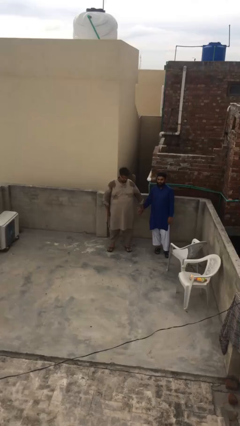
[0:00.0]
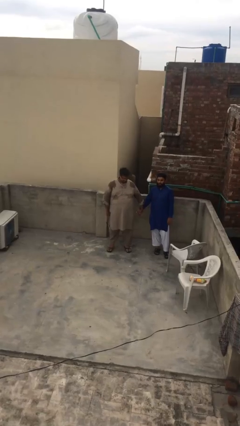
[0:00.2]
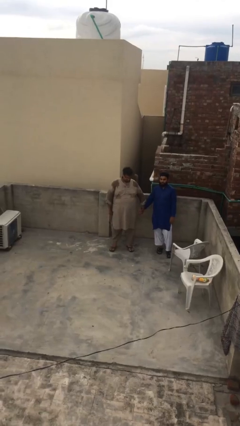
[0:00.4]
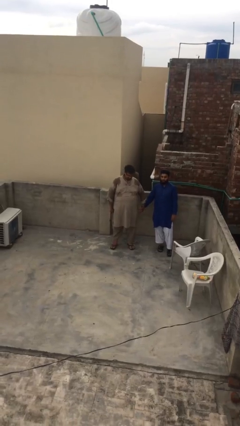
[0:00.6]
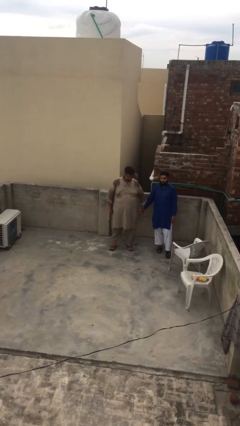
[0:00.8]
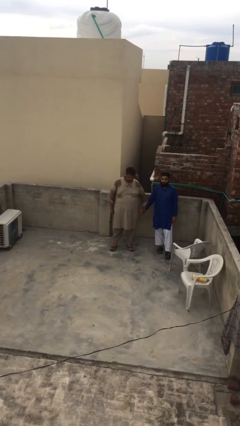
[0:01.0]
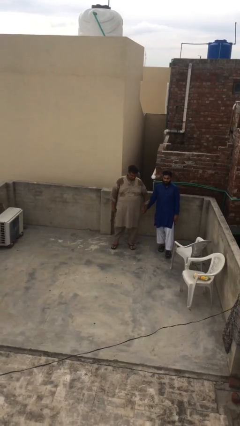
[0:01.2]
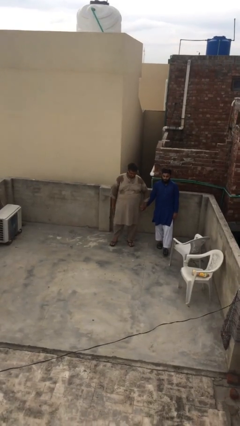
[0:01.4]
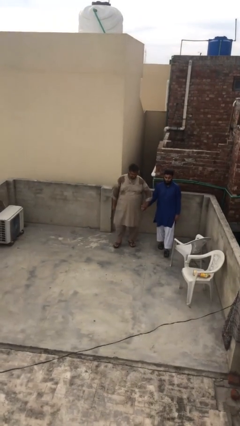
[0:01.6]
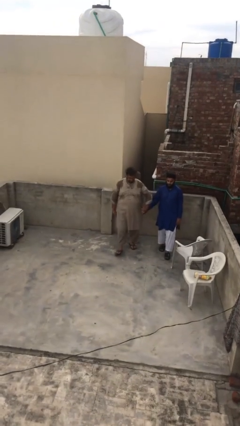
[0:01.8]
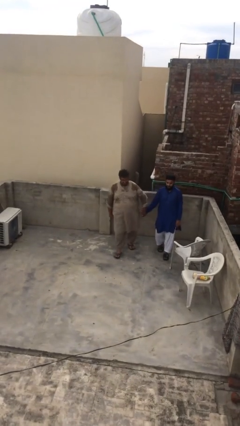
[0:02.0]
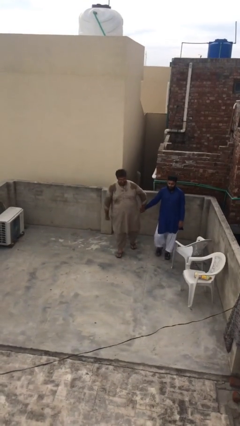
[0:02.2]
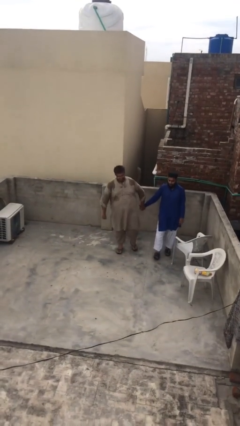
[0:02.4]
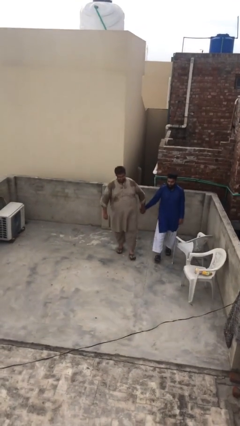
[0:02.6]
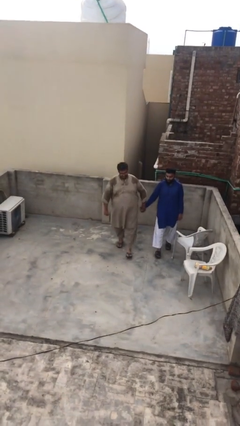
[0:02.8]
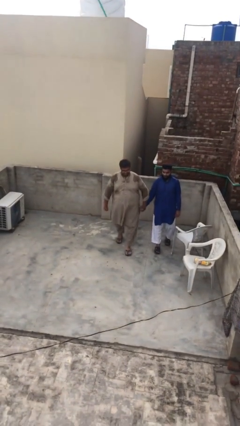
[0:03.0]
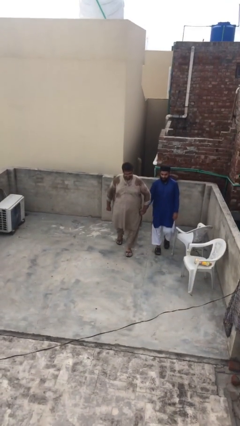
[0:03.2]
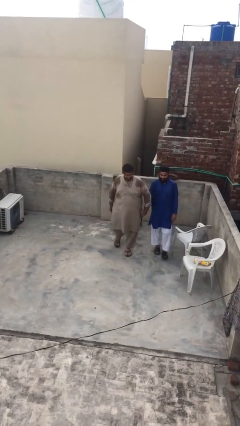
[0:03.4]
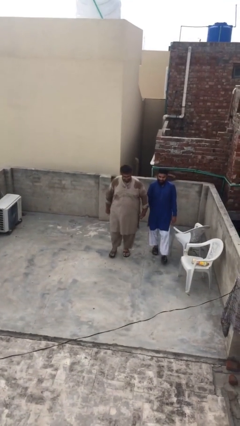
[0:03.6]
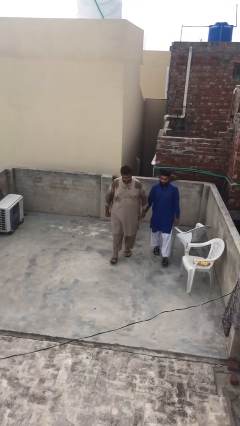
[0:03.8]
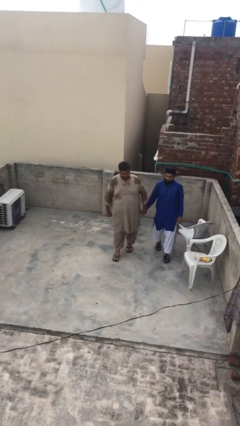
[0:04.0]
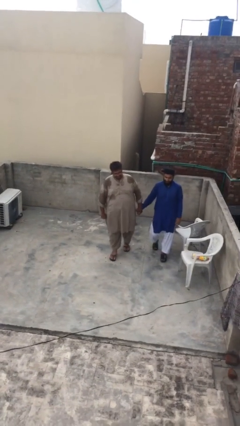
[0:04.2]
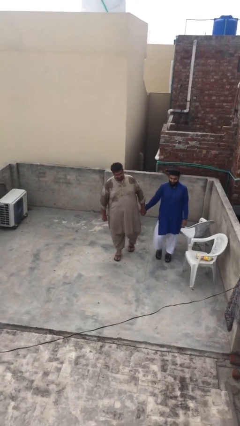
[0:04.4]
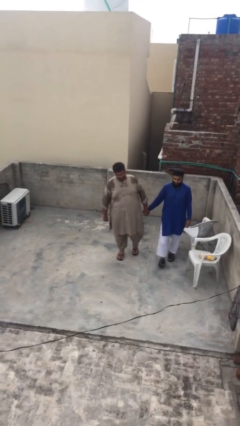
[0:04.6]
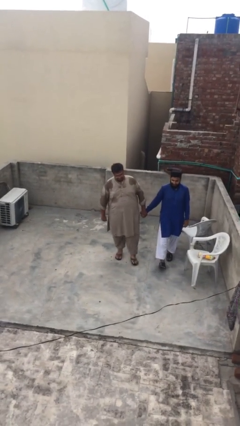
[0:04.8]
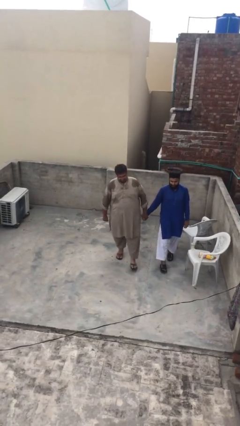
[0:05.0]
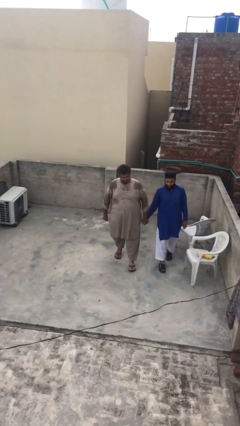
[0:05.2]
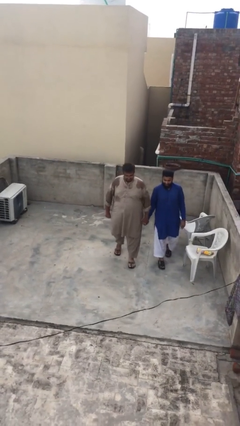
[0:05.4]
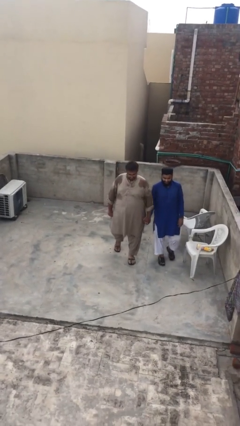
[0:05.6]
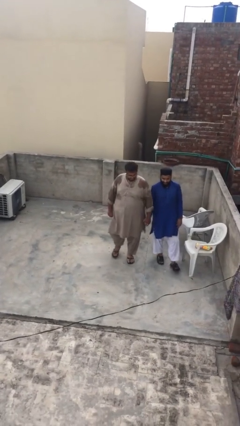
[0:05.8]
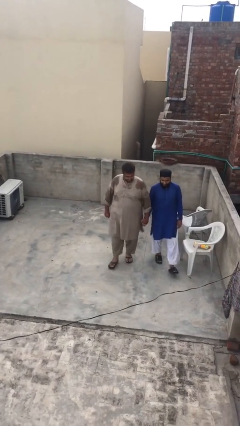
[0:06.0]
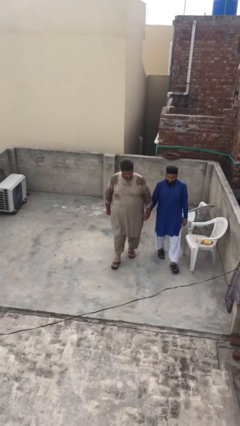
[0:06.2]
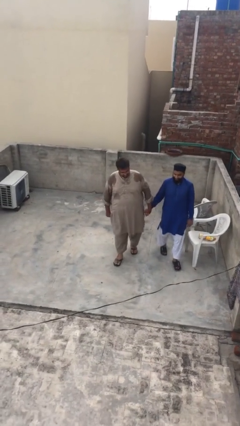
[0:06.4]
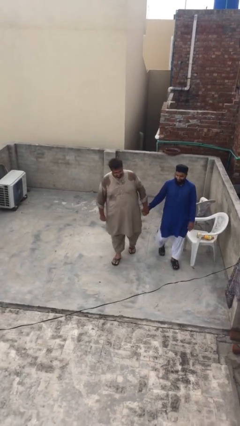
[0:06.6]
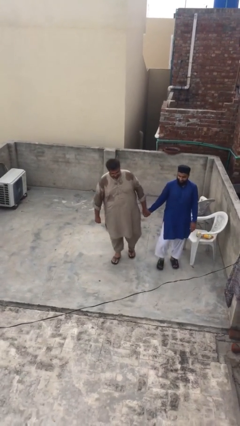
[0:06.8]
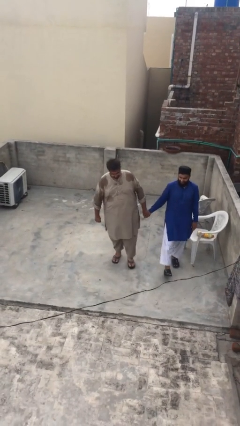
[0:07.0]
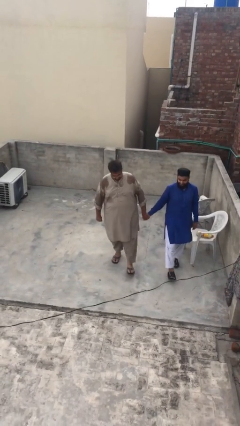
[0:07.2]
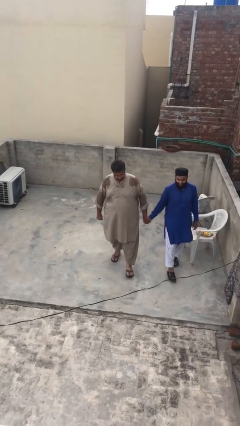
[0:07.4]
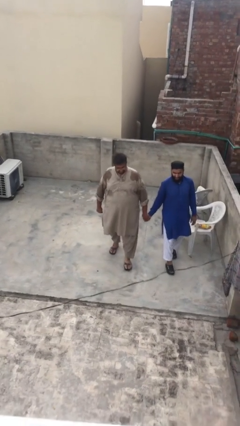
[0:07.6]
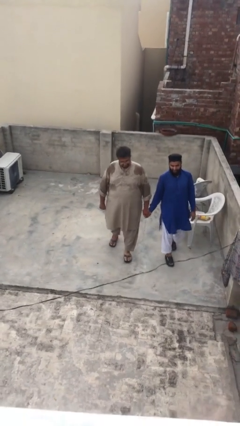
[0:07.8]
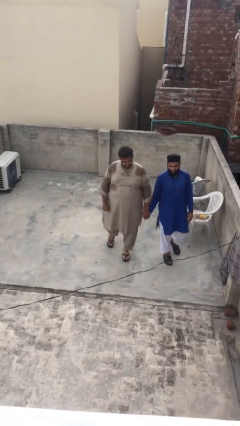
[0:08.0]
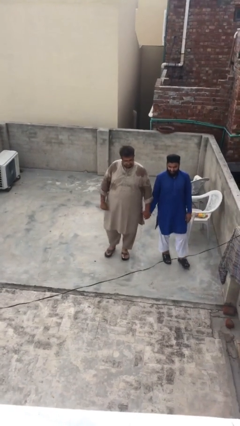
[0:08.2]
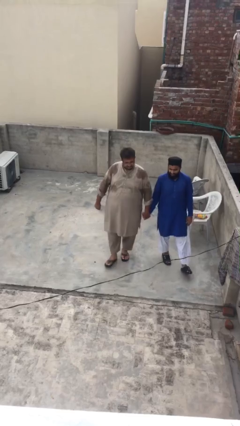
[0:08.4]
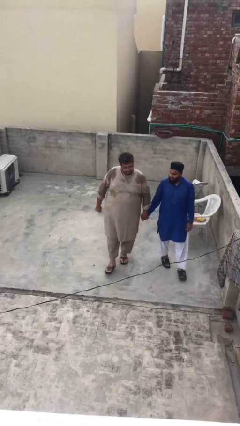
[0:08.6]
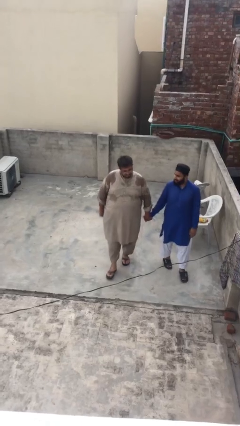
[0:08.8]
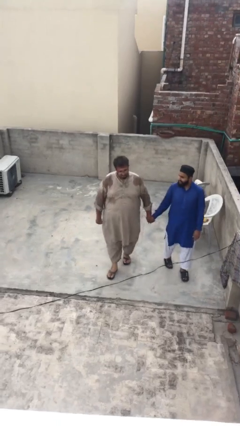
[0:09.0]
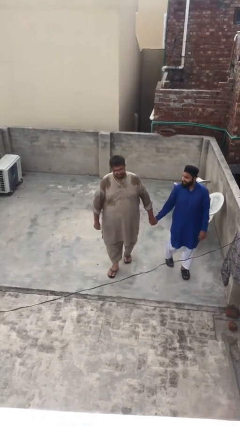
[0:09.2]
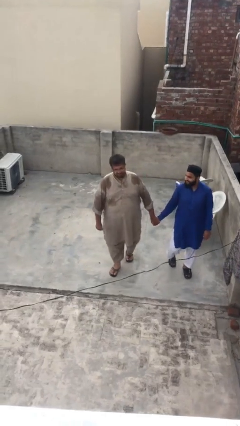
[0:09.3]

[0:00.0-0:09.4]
person holds hand

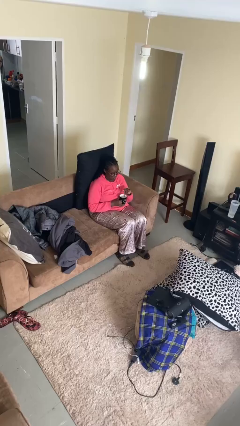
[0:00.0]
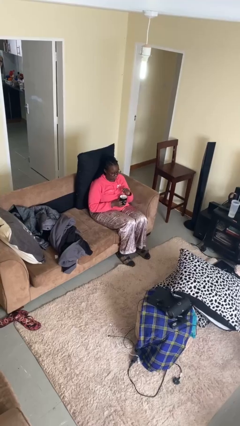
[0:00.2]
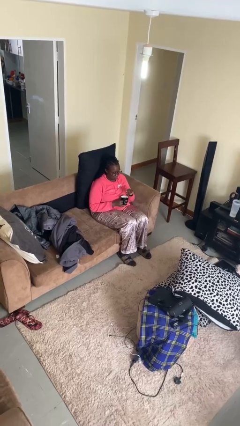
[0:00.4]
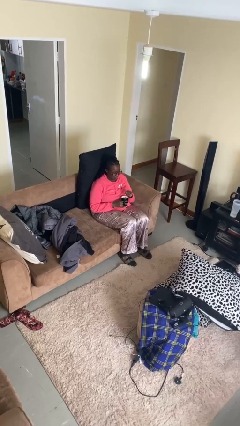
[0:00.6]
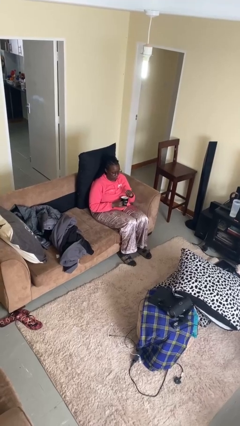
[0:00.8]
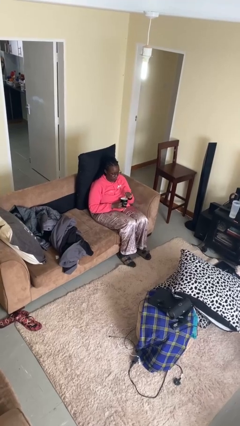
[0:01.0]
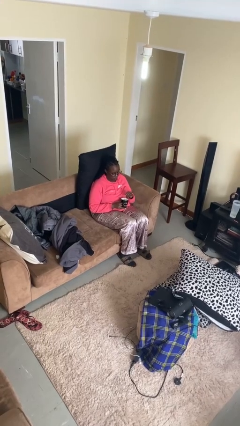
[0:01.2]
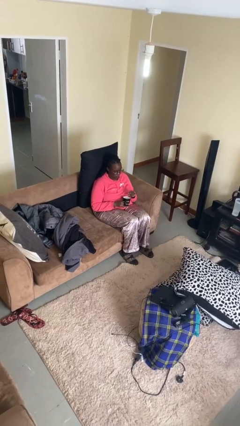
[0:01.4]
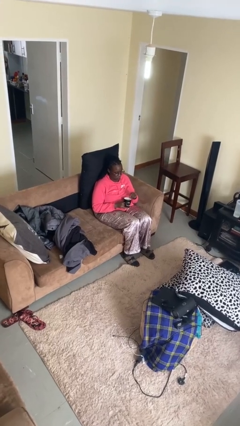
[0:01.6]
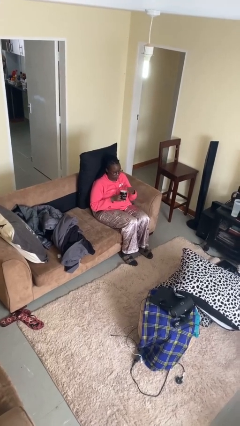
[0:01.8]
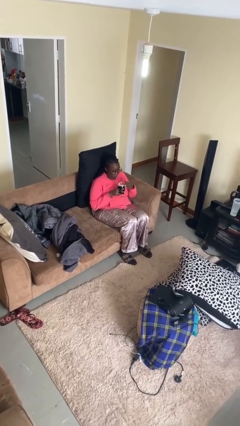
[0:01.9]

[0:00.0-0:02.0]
person stirs mug

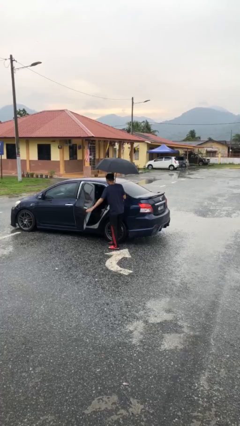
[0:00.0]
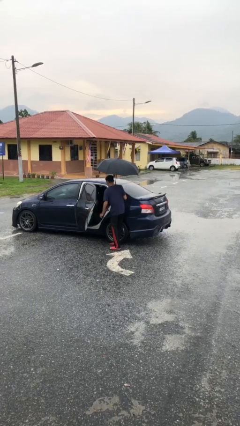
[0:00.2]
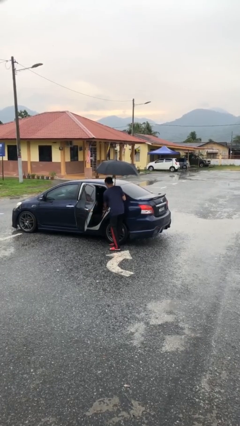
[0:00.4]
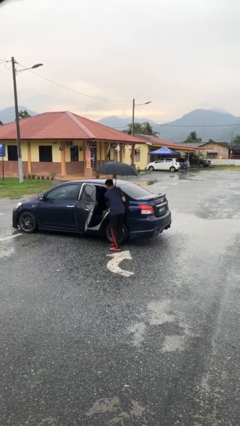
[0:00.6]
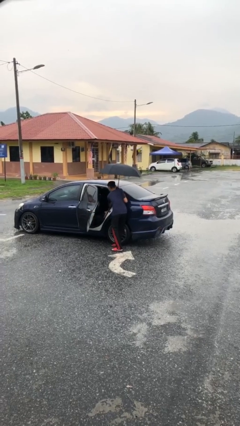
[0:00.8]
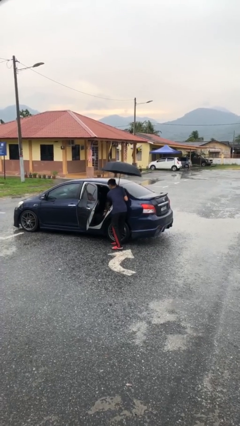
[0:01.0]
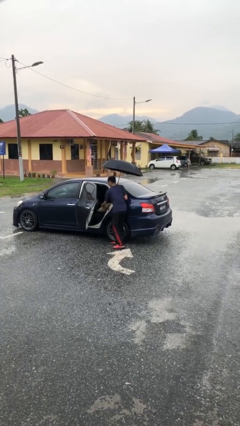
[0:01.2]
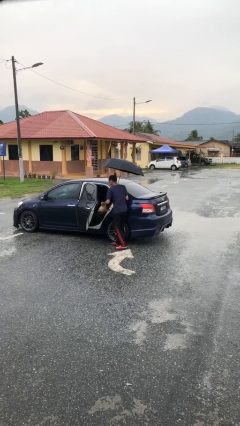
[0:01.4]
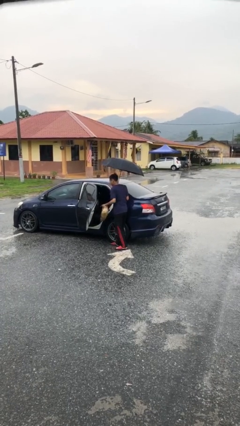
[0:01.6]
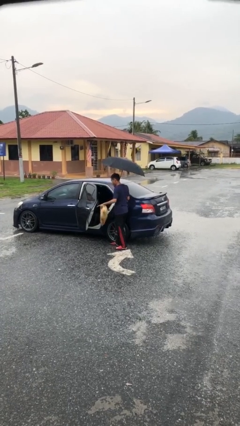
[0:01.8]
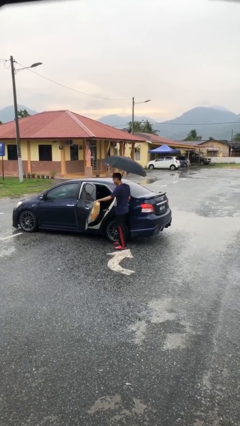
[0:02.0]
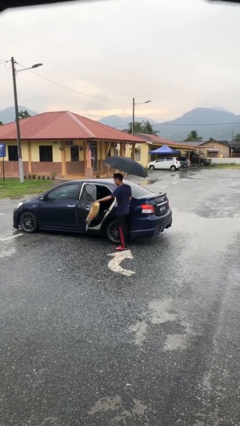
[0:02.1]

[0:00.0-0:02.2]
person unloads car

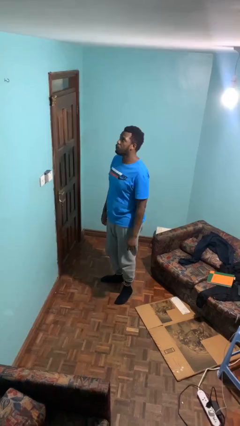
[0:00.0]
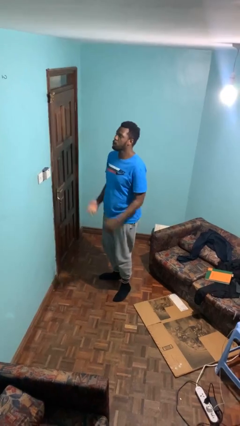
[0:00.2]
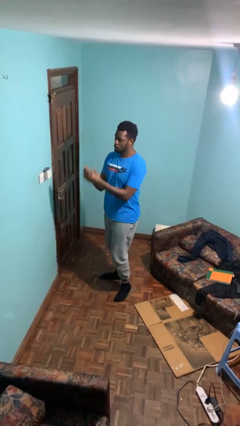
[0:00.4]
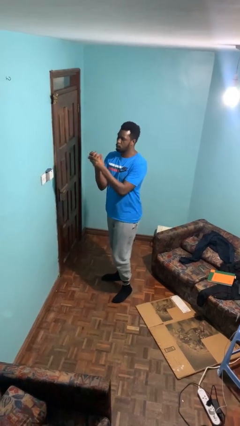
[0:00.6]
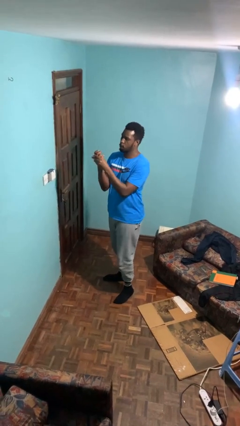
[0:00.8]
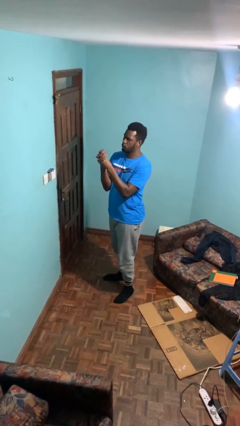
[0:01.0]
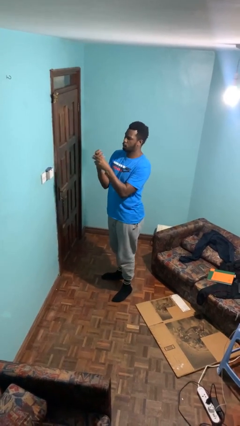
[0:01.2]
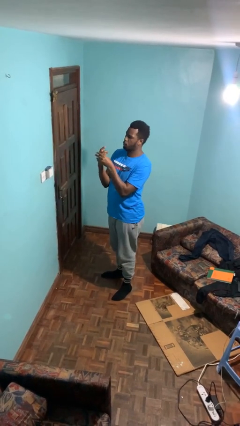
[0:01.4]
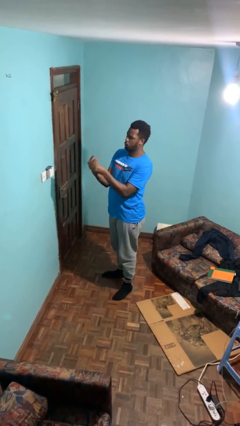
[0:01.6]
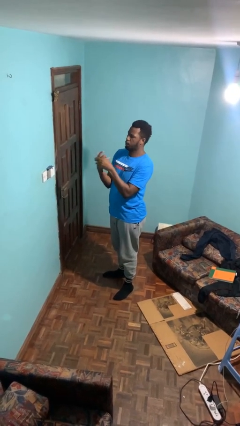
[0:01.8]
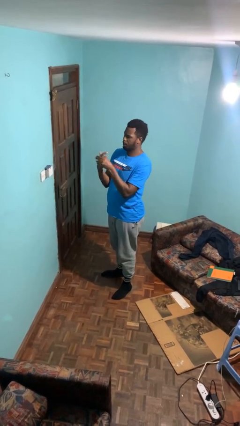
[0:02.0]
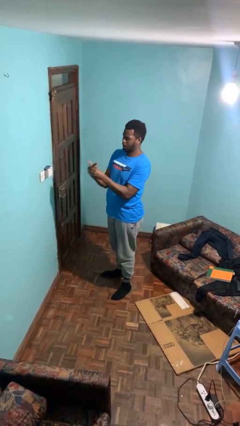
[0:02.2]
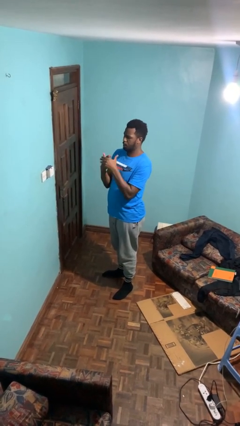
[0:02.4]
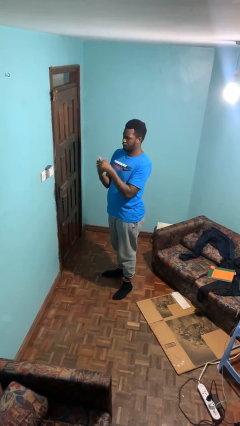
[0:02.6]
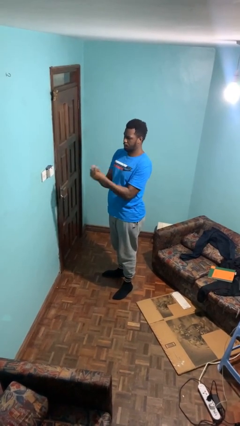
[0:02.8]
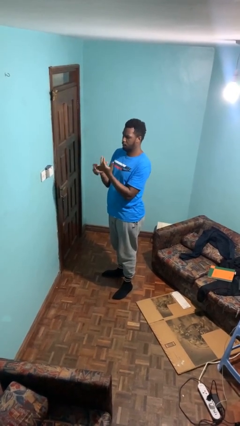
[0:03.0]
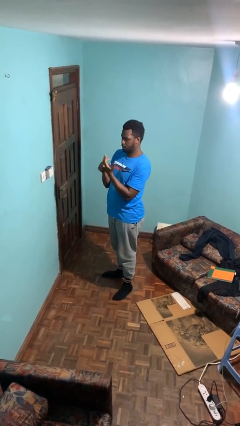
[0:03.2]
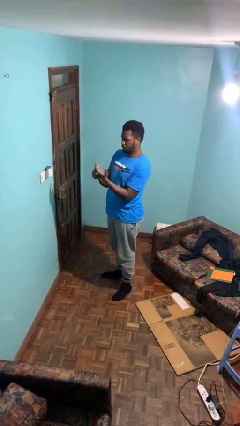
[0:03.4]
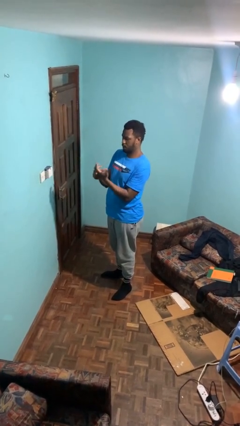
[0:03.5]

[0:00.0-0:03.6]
person cracks knuckles

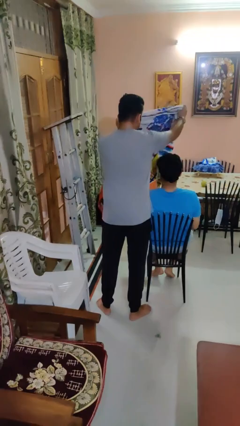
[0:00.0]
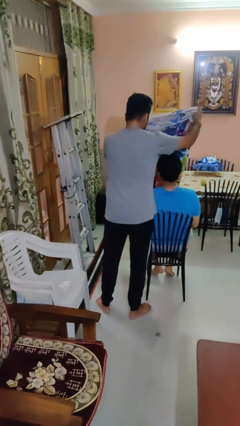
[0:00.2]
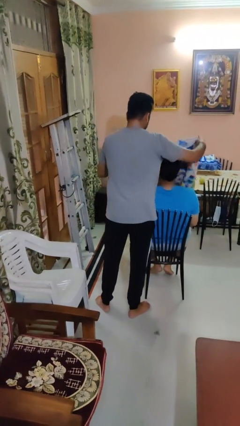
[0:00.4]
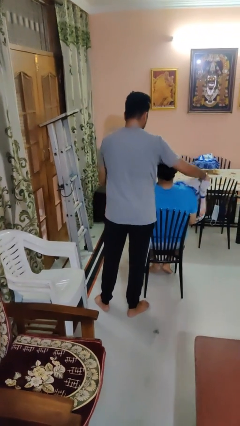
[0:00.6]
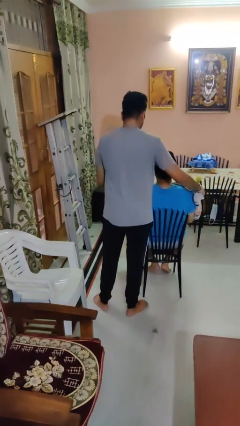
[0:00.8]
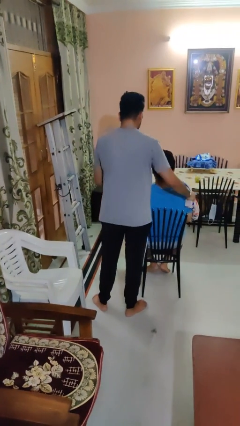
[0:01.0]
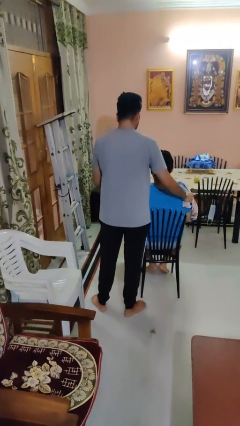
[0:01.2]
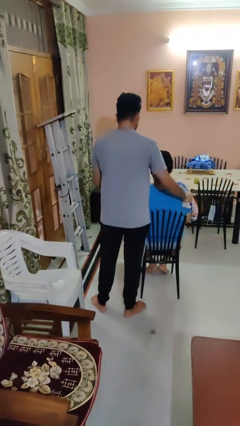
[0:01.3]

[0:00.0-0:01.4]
person covers friend with blanket
